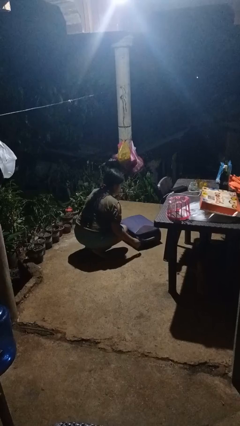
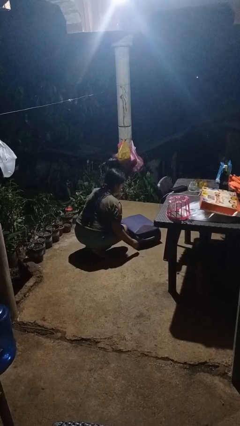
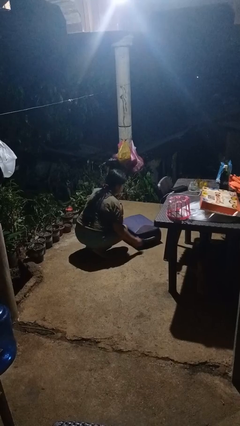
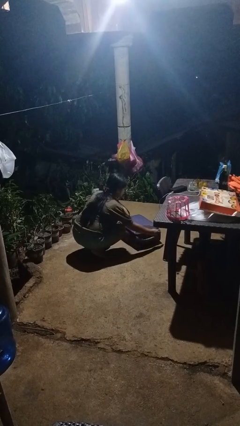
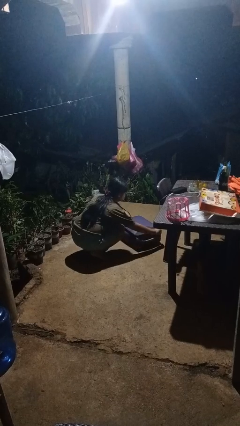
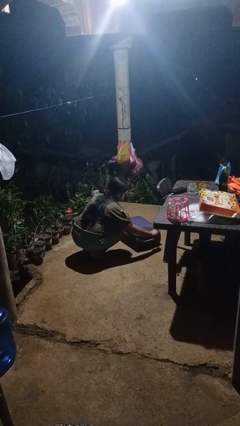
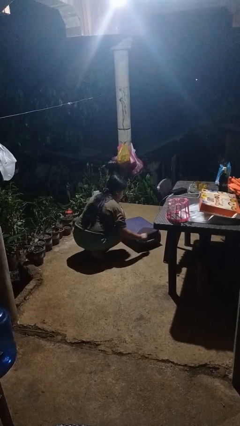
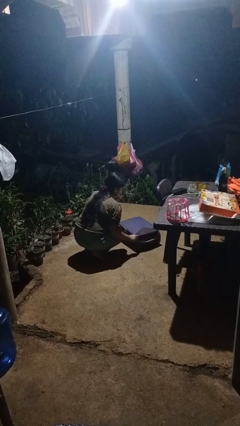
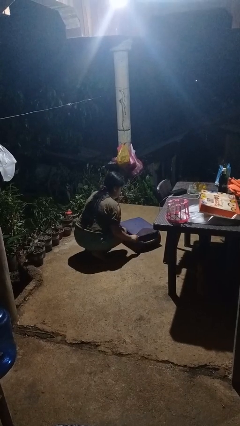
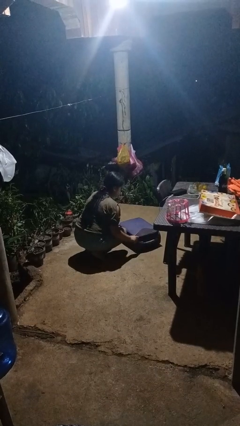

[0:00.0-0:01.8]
person closes suitcase

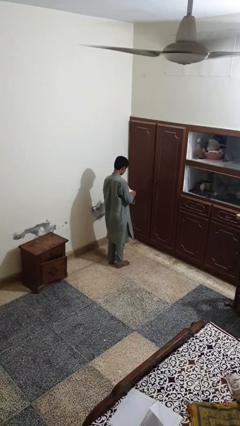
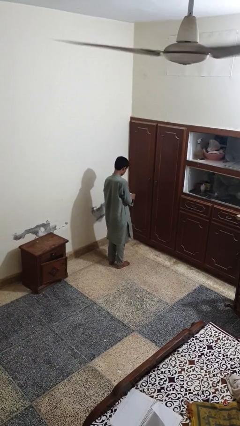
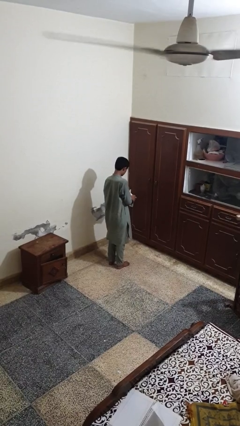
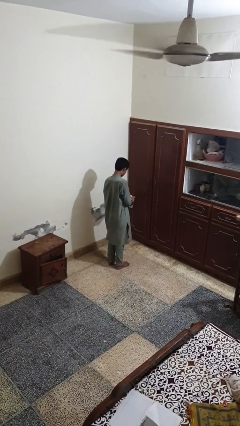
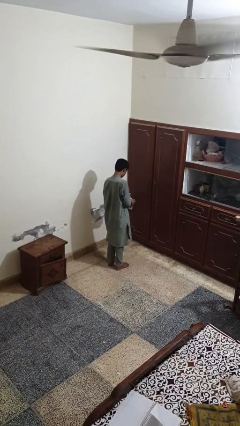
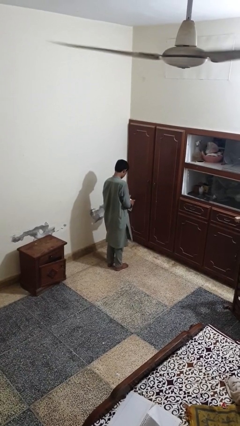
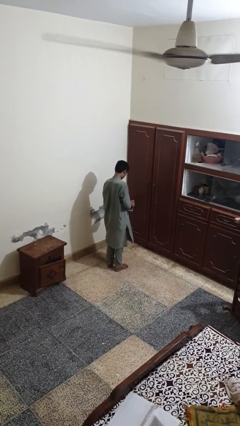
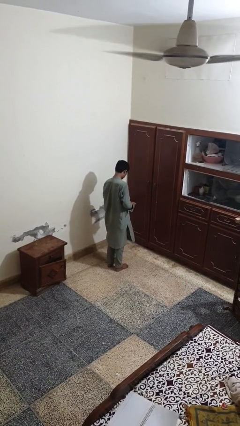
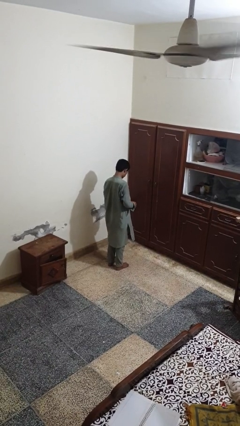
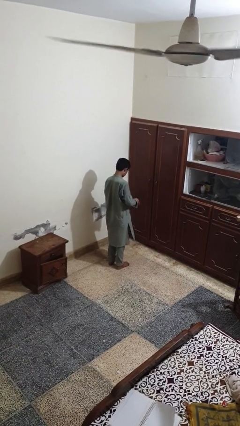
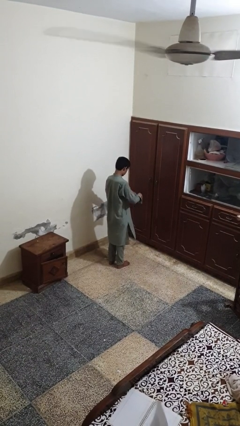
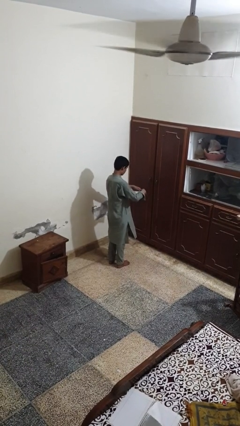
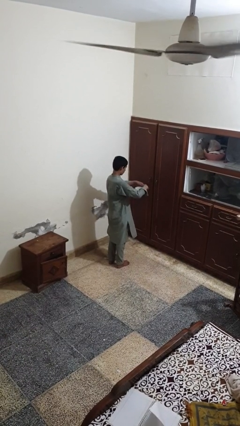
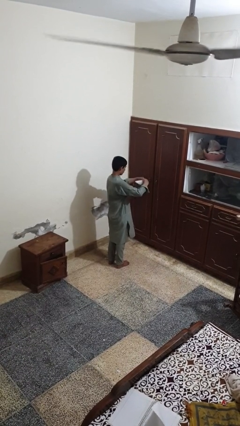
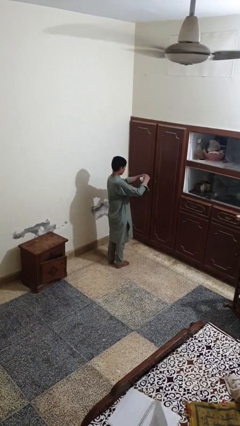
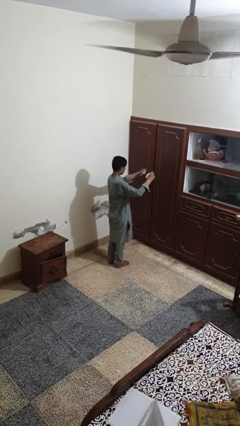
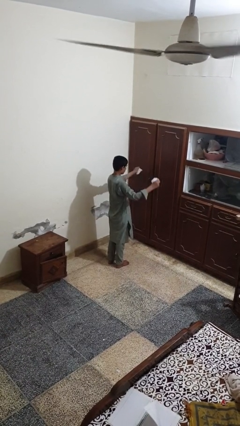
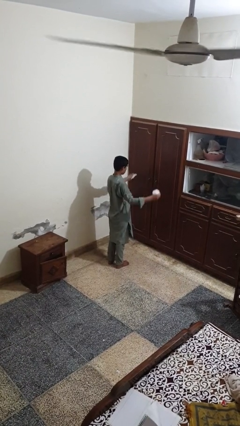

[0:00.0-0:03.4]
person tears paper

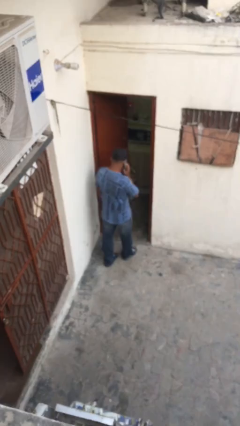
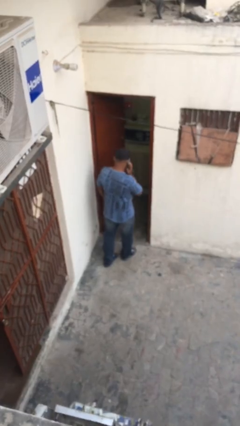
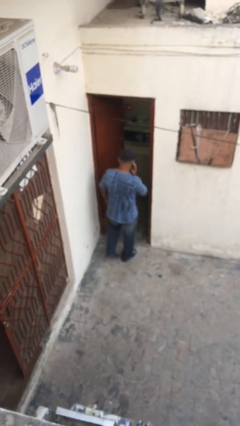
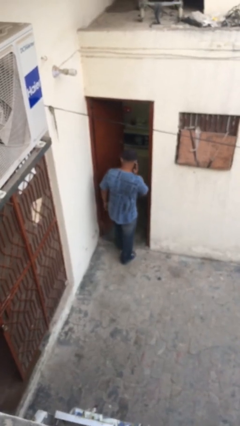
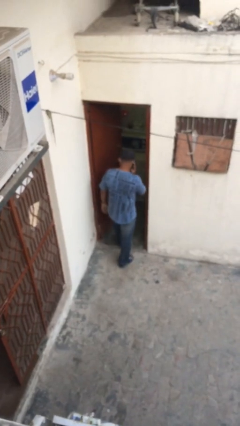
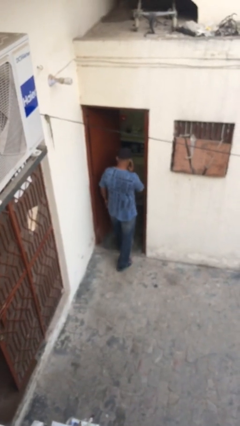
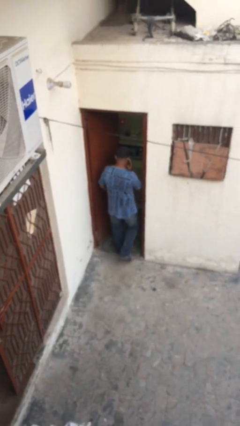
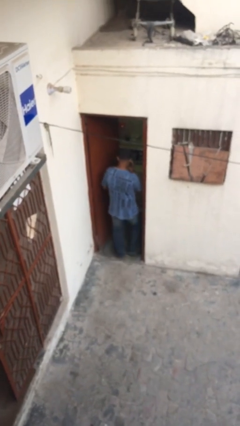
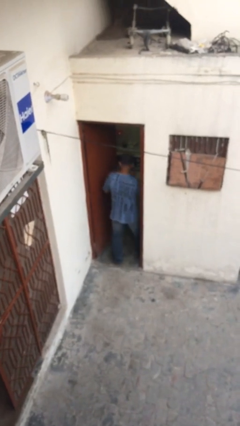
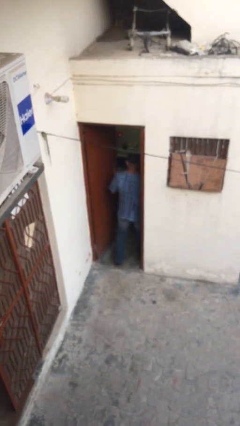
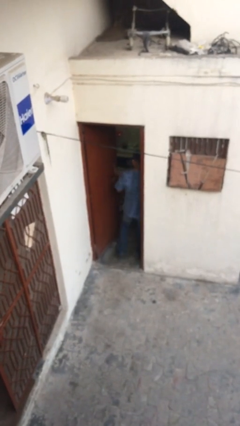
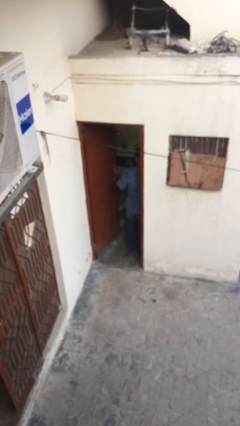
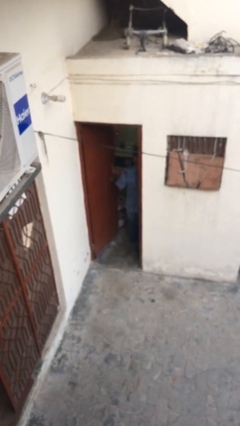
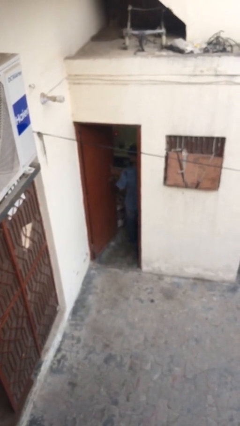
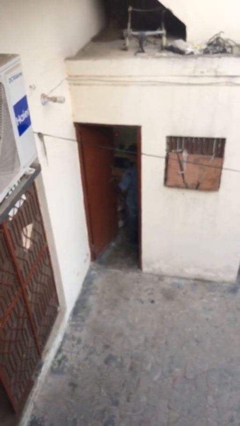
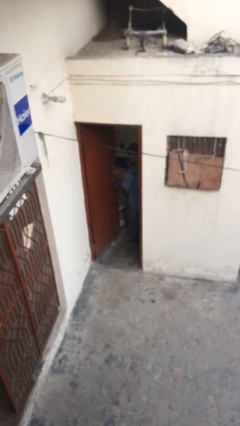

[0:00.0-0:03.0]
person exits scene through structure

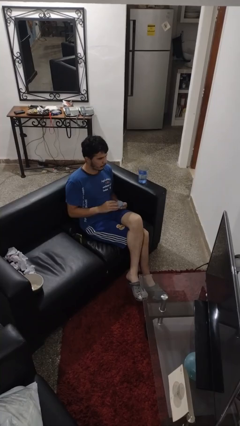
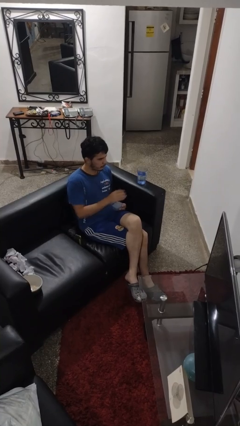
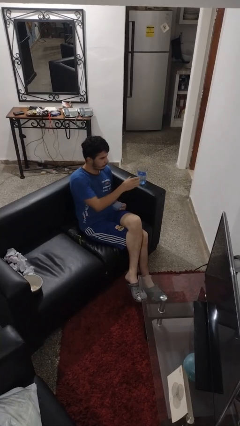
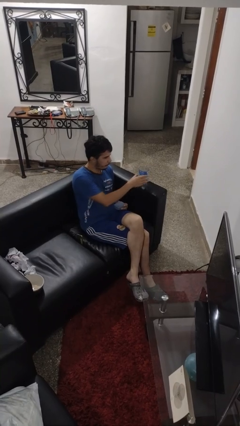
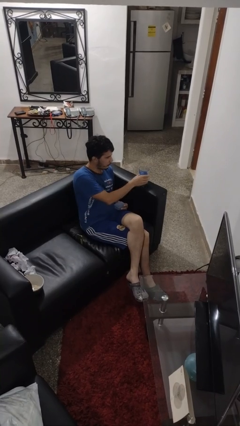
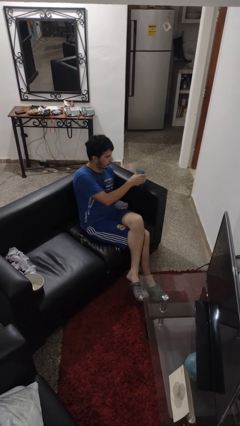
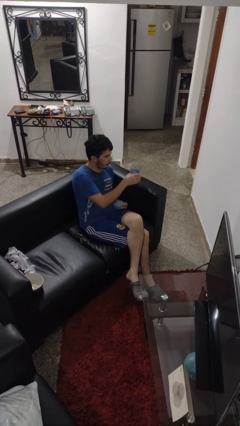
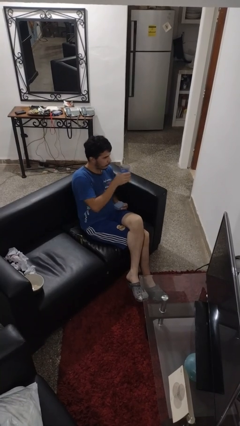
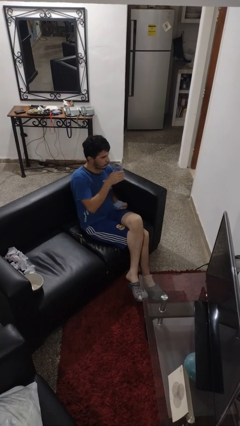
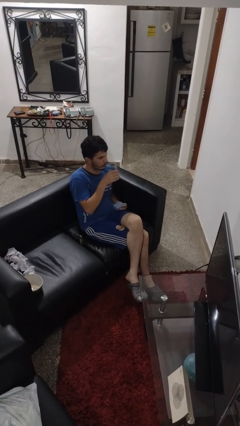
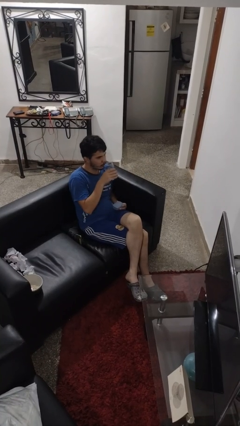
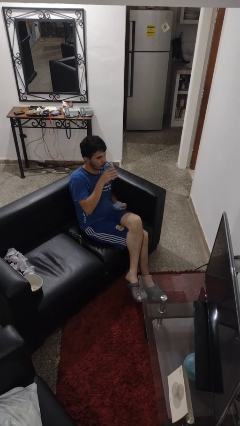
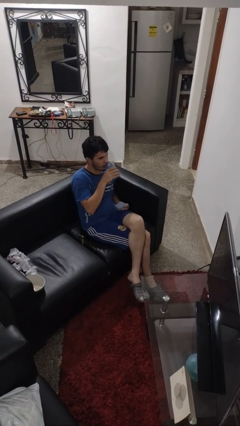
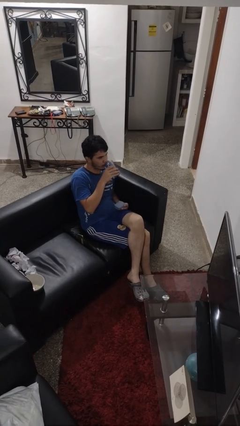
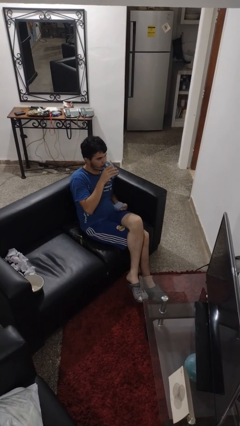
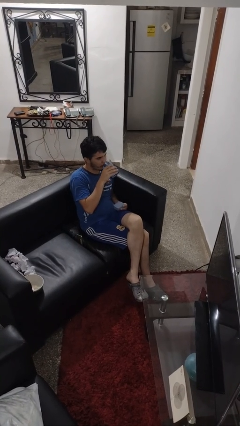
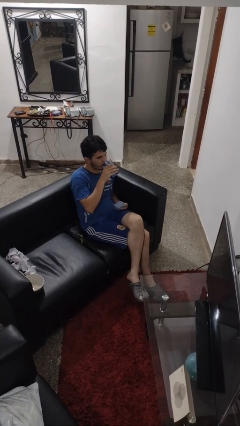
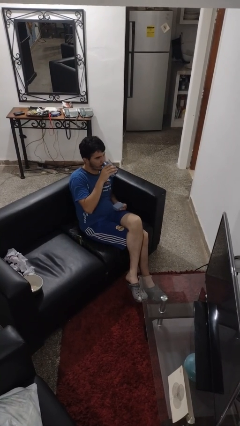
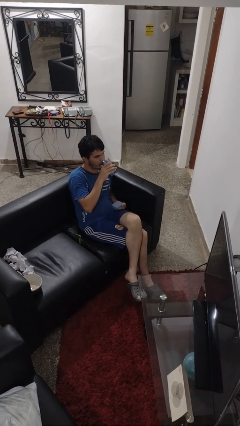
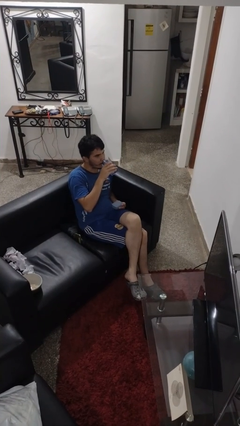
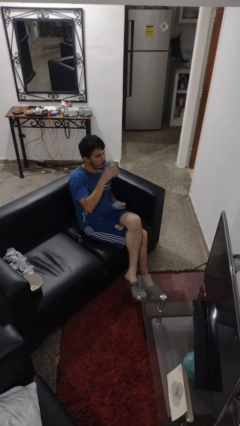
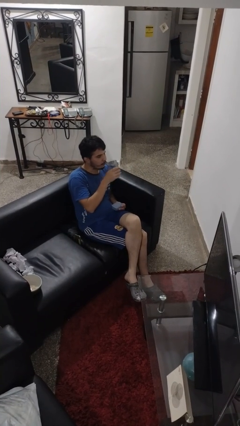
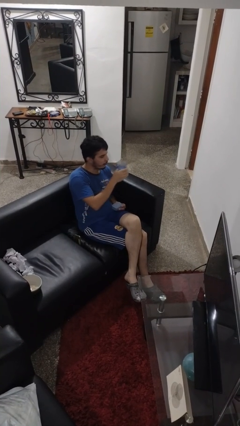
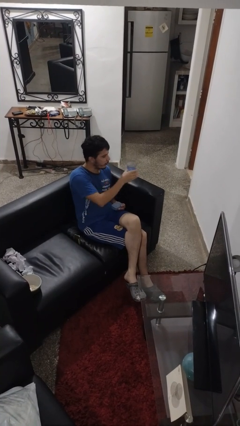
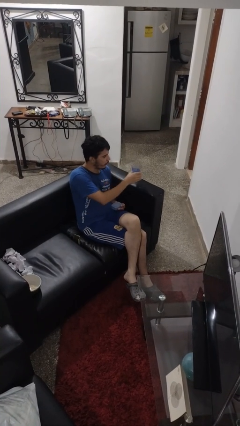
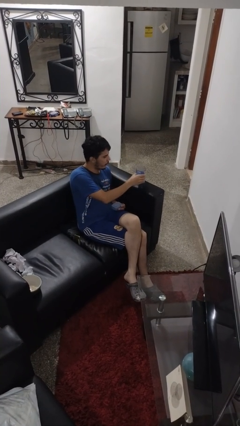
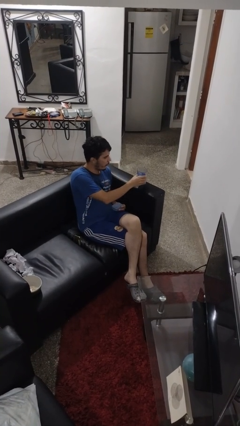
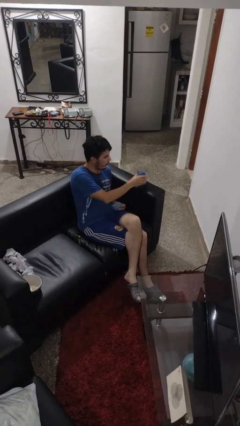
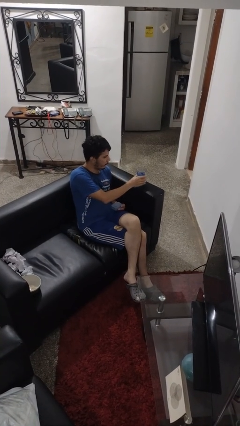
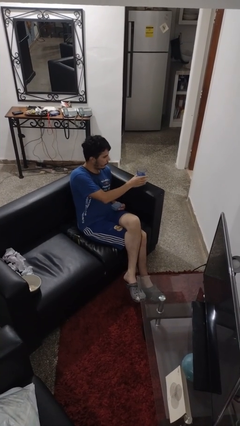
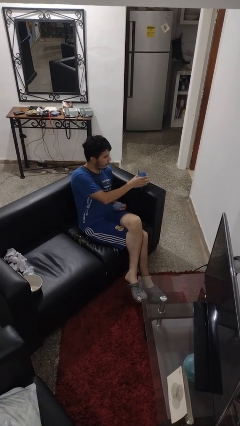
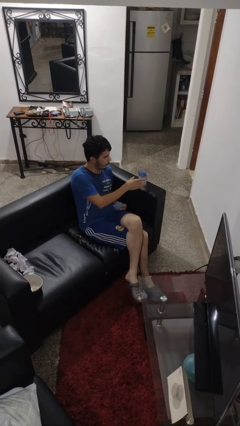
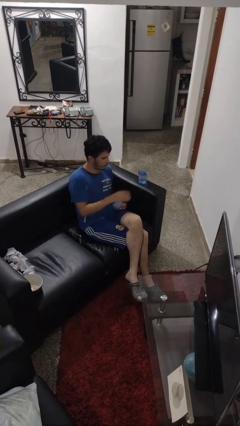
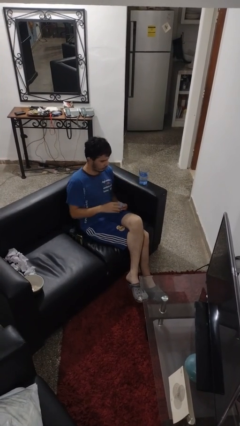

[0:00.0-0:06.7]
person drinks from cup

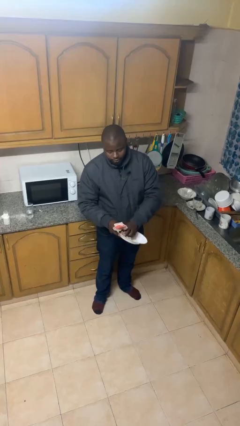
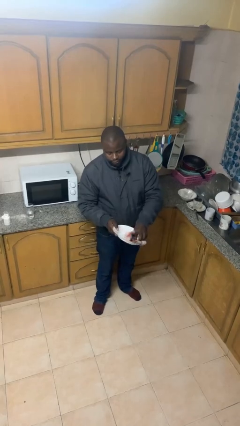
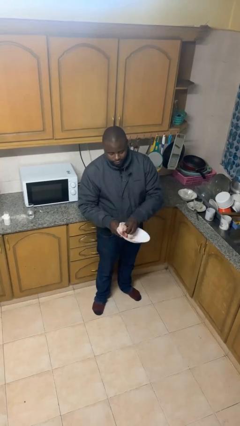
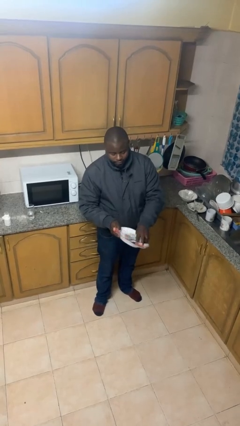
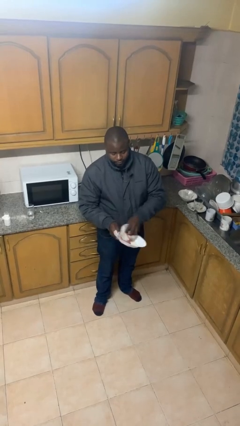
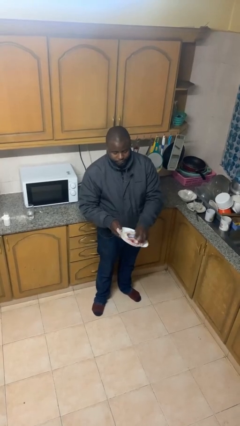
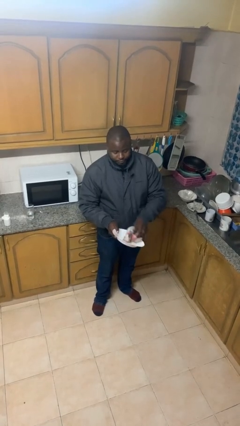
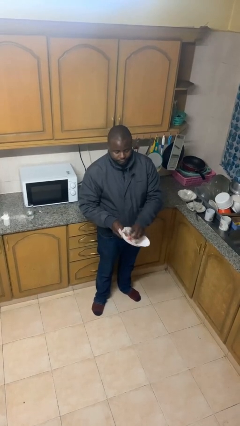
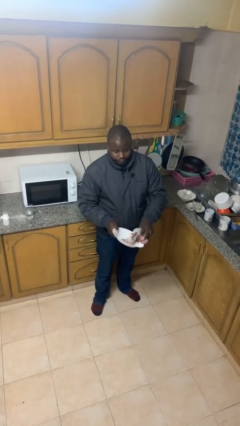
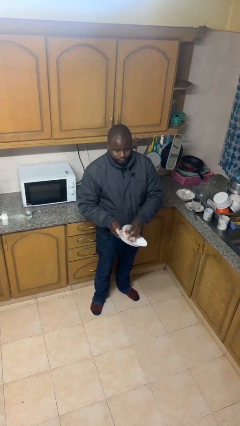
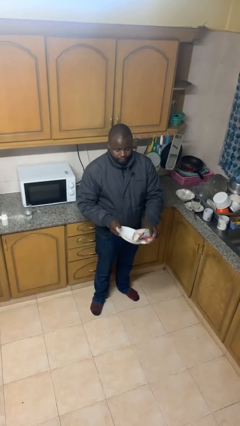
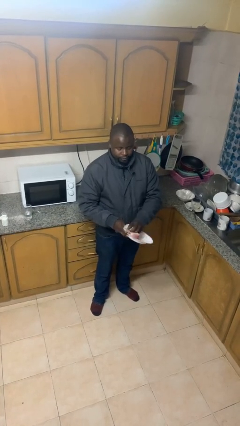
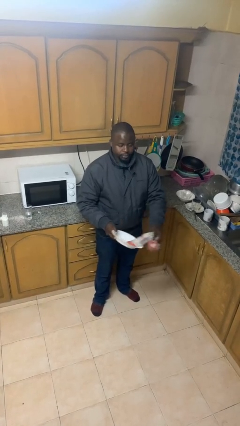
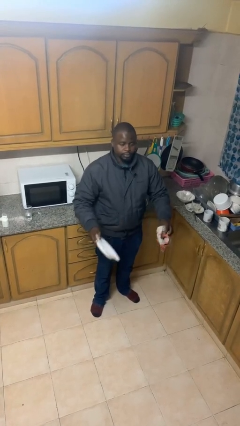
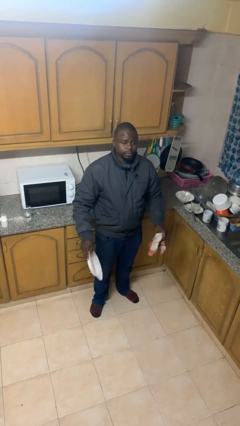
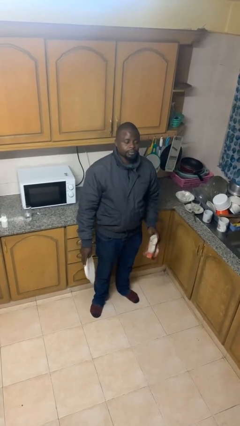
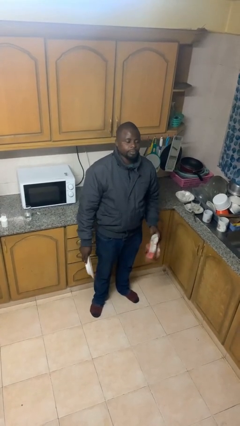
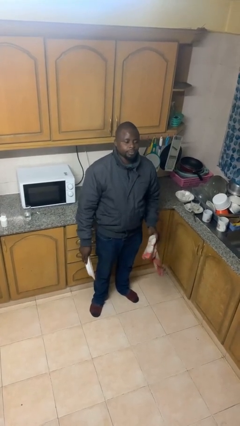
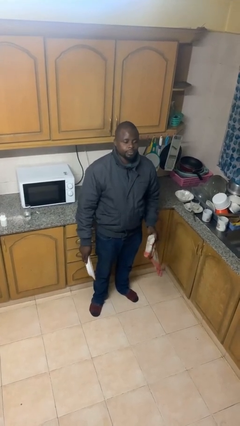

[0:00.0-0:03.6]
person dries dish
